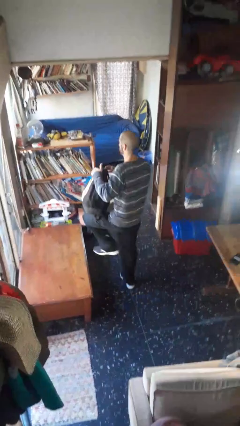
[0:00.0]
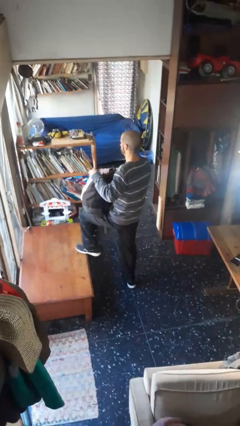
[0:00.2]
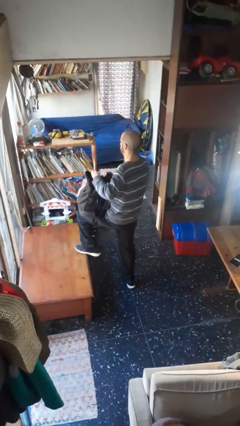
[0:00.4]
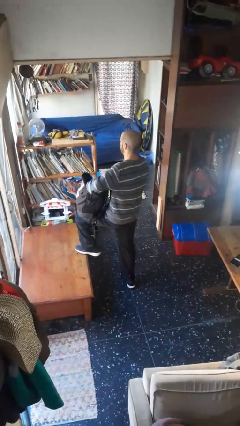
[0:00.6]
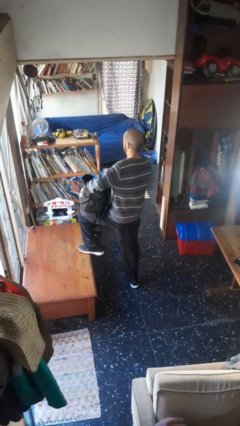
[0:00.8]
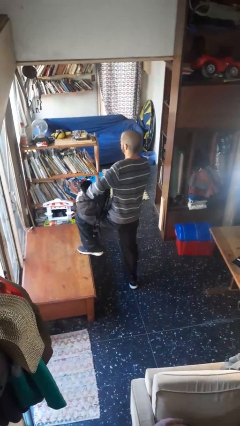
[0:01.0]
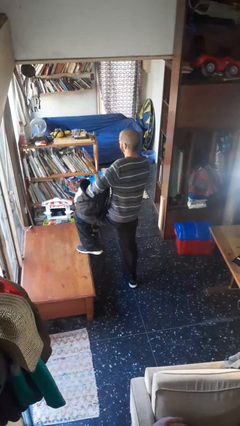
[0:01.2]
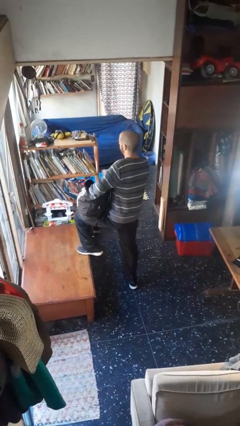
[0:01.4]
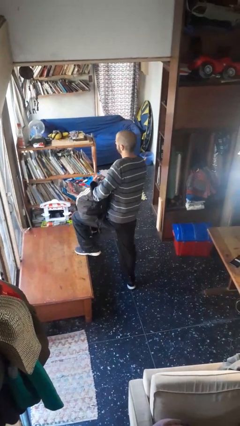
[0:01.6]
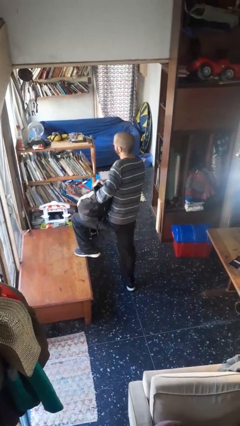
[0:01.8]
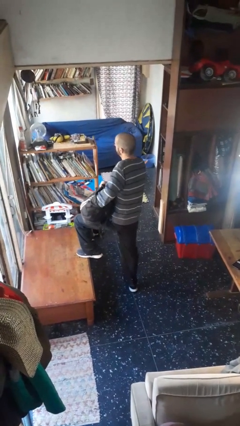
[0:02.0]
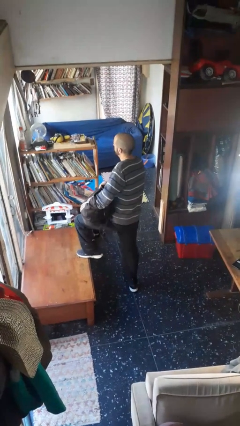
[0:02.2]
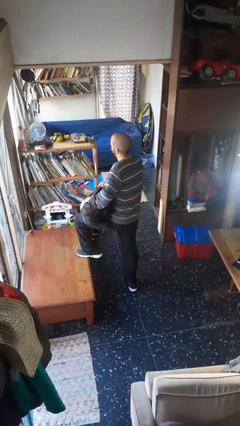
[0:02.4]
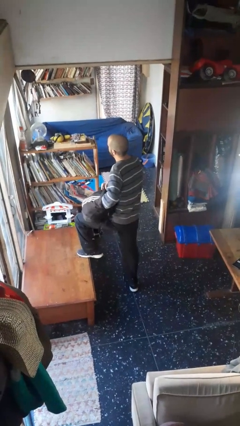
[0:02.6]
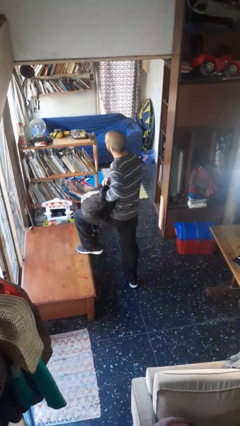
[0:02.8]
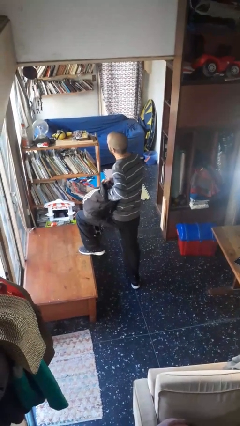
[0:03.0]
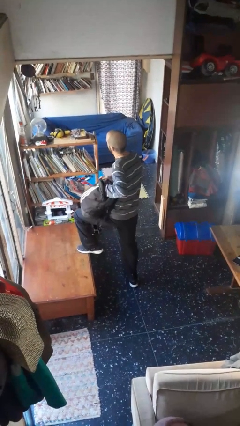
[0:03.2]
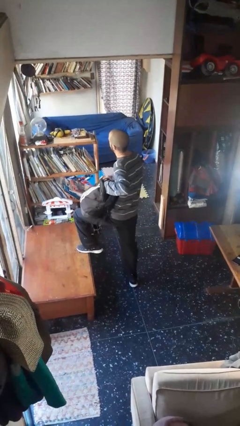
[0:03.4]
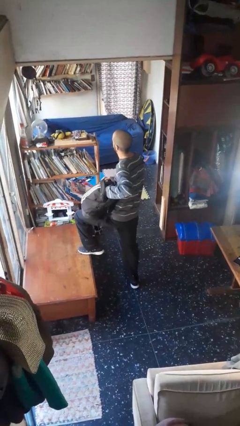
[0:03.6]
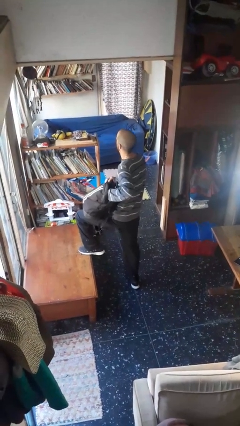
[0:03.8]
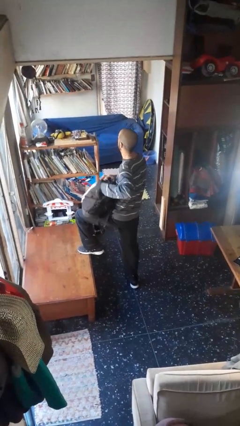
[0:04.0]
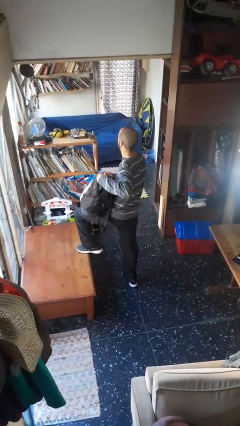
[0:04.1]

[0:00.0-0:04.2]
person searches in backpack

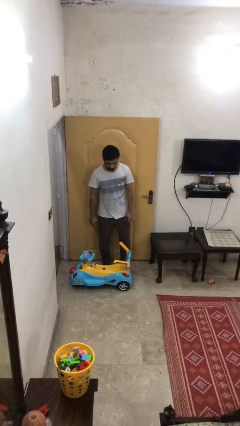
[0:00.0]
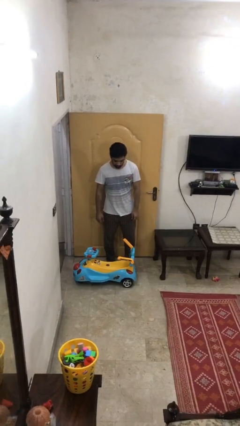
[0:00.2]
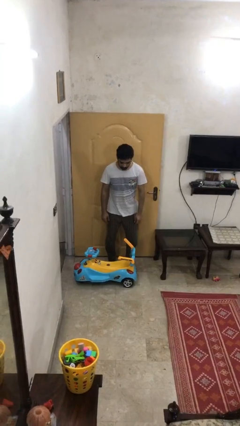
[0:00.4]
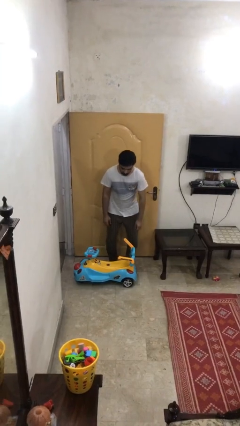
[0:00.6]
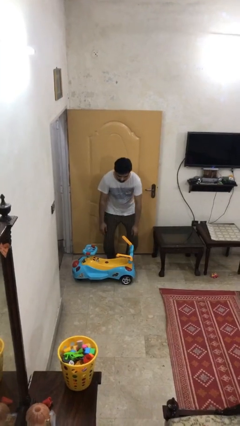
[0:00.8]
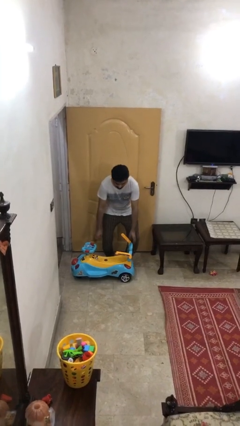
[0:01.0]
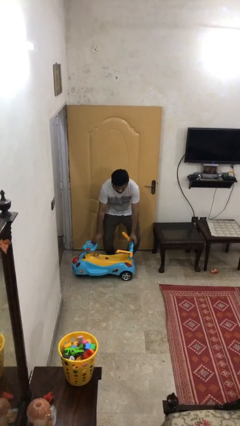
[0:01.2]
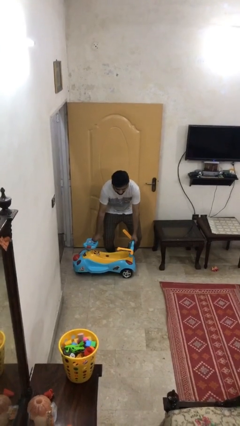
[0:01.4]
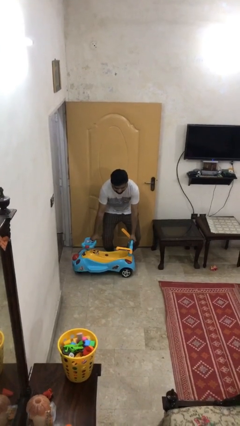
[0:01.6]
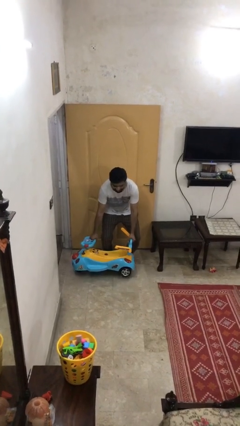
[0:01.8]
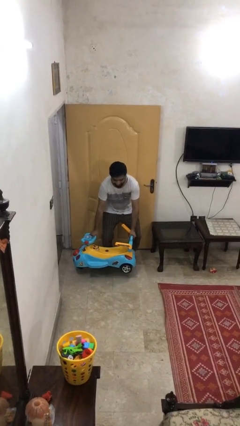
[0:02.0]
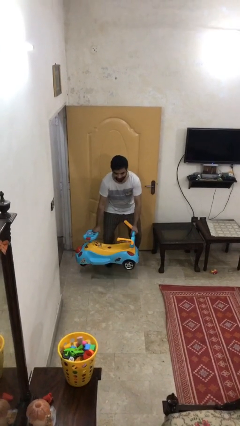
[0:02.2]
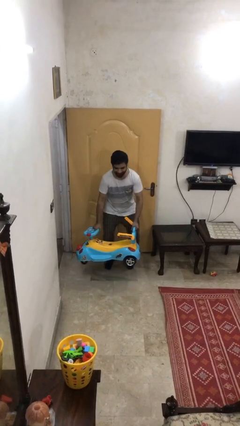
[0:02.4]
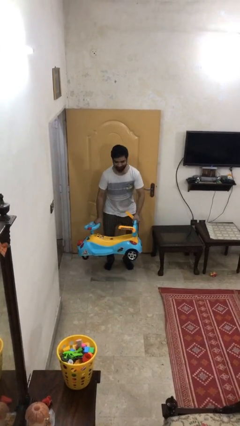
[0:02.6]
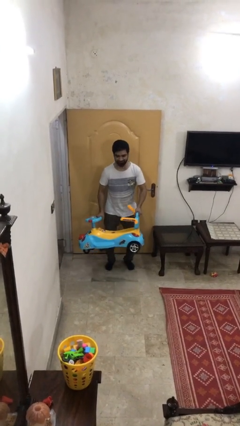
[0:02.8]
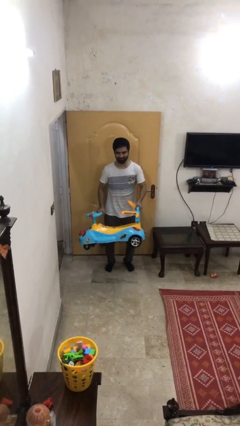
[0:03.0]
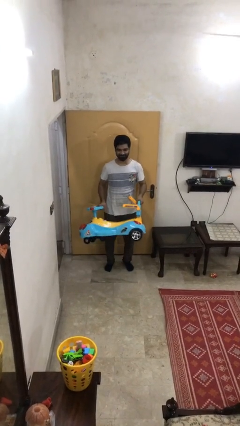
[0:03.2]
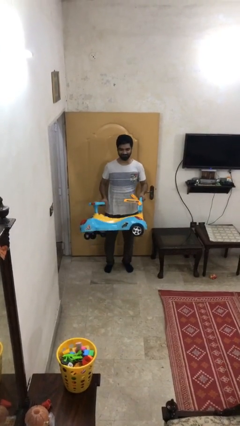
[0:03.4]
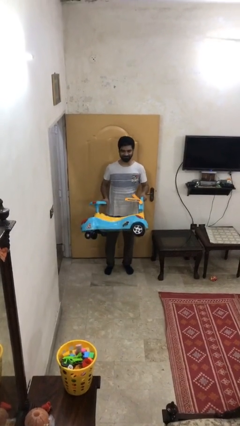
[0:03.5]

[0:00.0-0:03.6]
person picks up object from floor

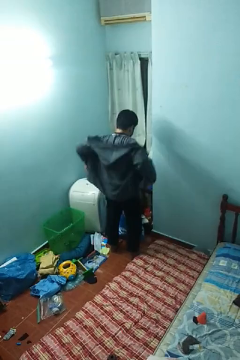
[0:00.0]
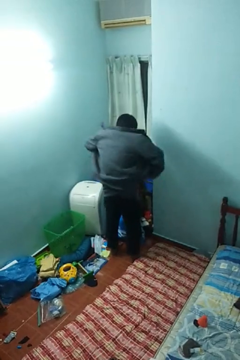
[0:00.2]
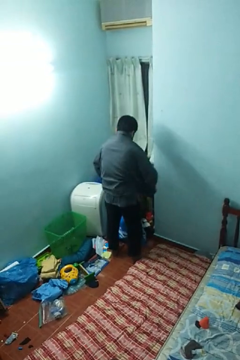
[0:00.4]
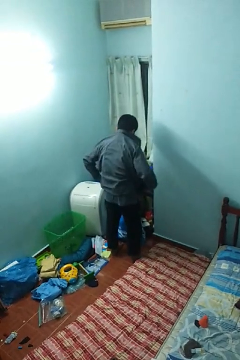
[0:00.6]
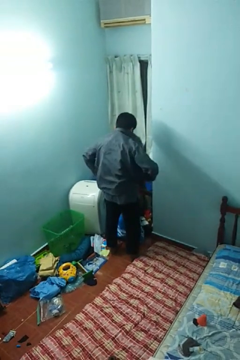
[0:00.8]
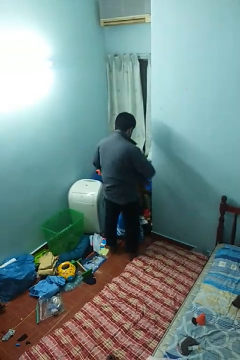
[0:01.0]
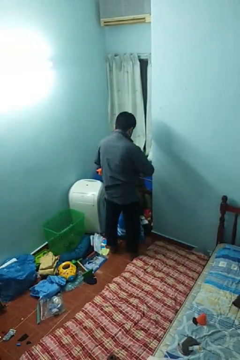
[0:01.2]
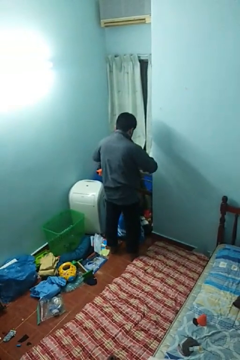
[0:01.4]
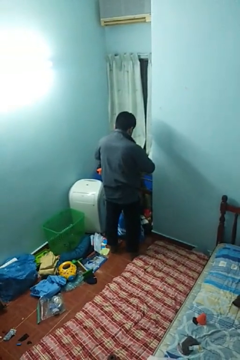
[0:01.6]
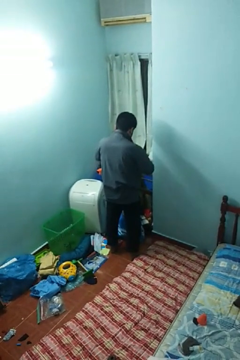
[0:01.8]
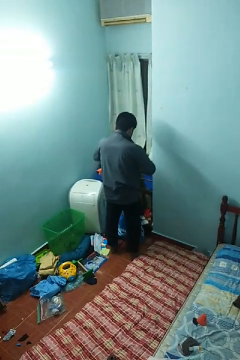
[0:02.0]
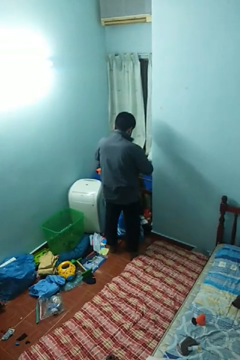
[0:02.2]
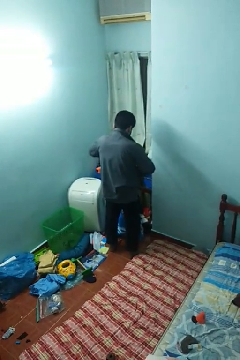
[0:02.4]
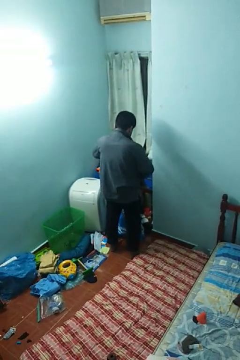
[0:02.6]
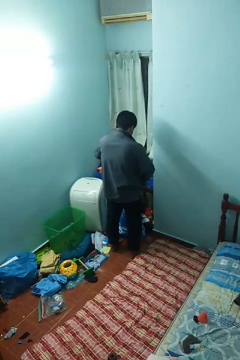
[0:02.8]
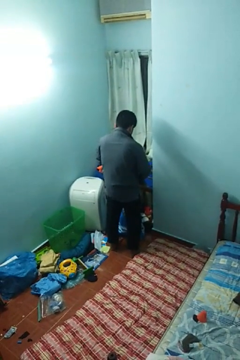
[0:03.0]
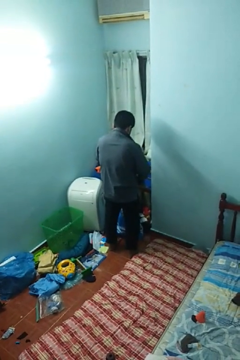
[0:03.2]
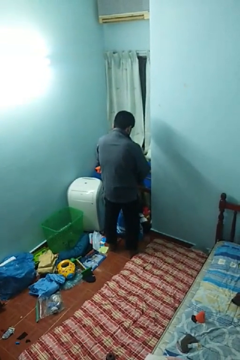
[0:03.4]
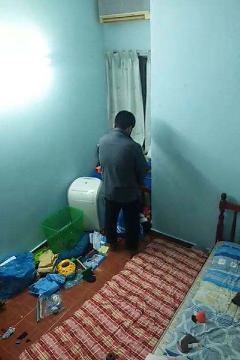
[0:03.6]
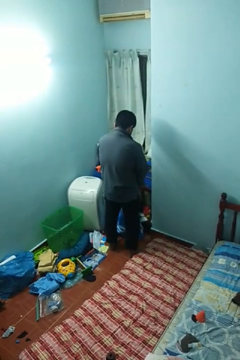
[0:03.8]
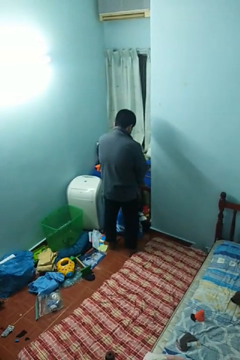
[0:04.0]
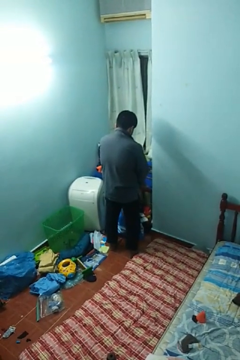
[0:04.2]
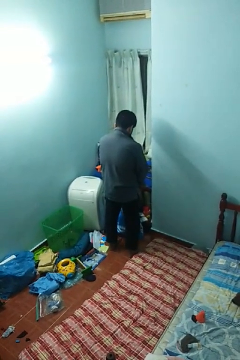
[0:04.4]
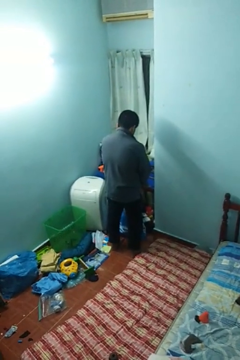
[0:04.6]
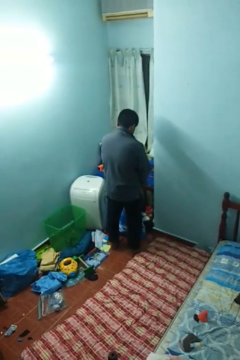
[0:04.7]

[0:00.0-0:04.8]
person buttons shirt

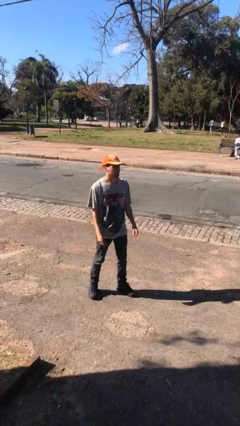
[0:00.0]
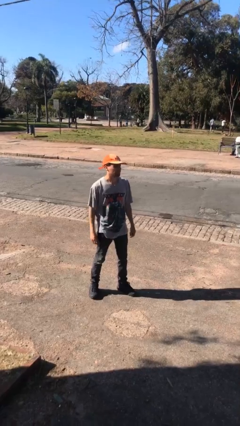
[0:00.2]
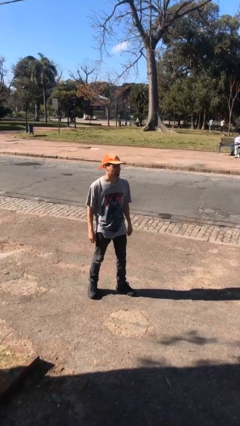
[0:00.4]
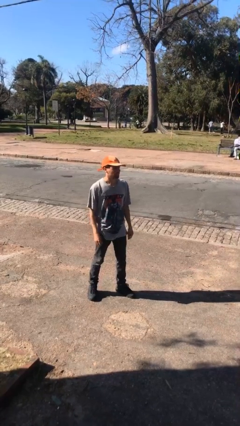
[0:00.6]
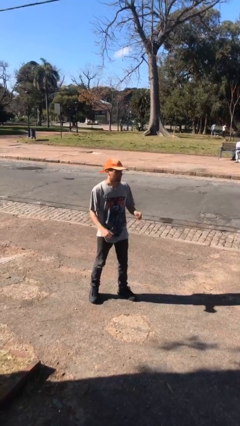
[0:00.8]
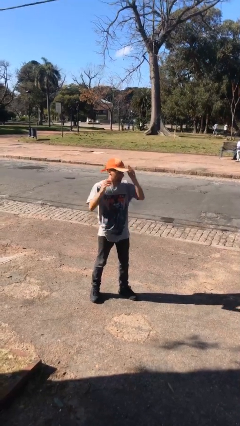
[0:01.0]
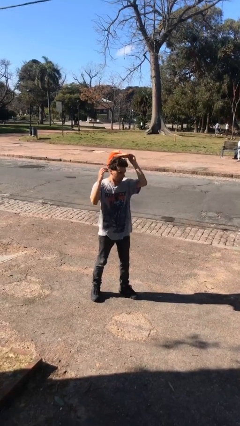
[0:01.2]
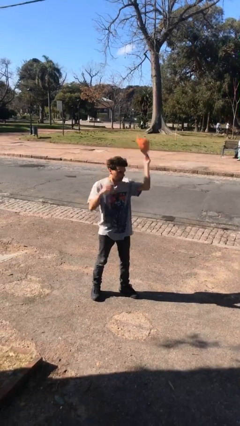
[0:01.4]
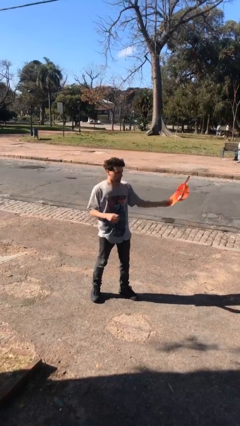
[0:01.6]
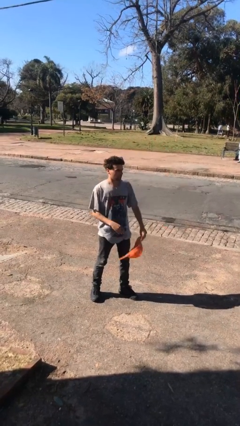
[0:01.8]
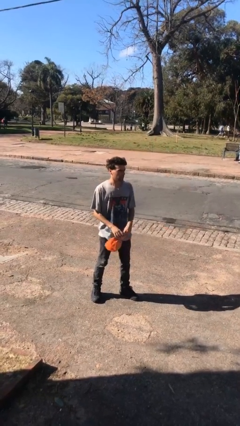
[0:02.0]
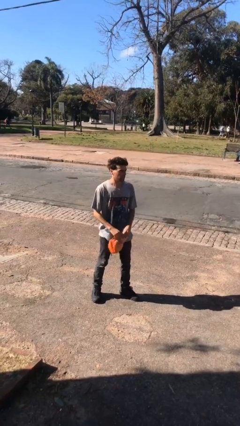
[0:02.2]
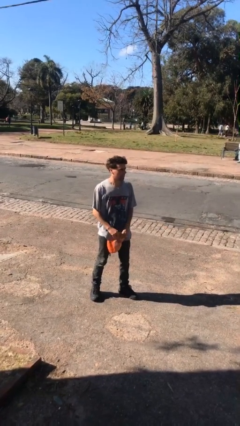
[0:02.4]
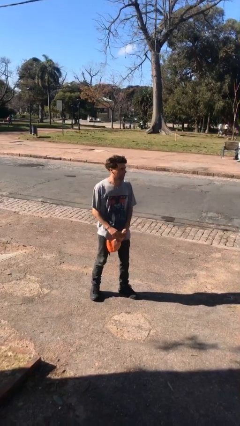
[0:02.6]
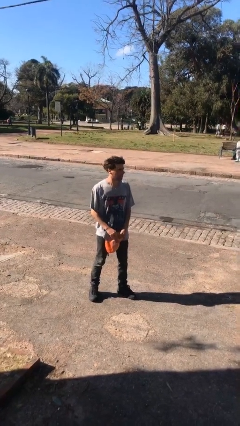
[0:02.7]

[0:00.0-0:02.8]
person takes off hat

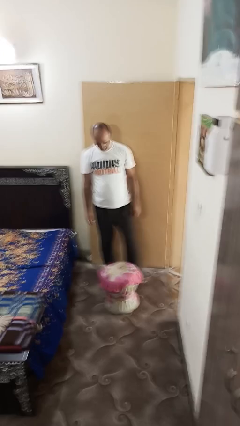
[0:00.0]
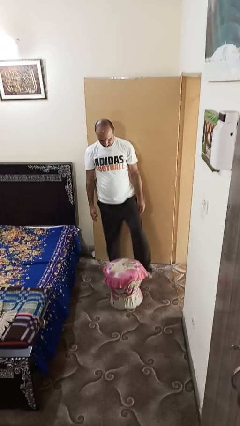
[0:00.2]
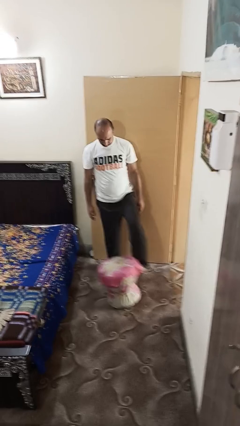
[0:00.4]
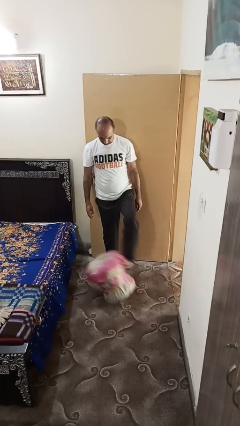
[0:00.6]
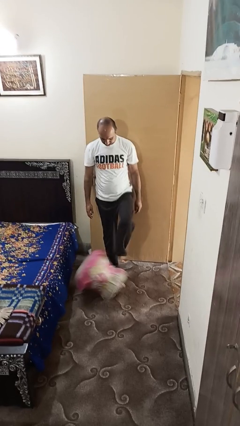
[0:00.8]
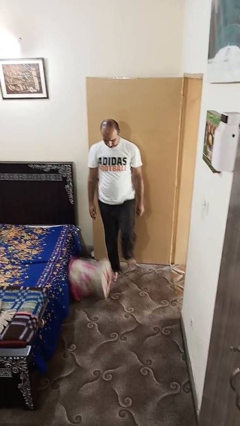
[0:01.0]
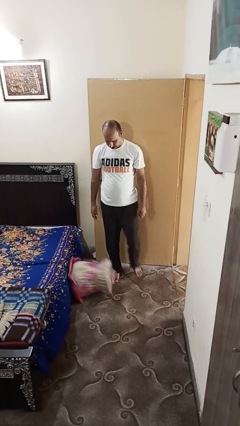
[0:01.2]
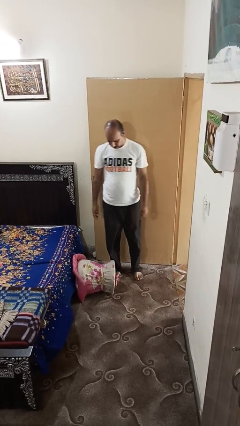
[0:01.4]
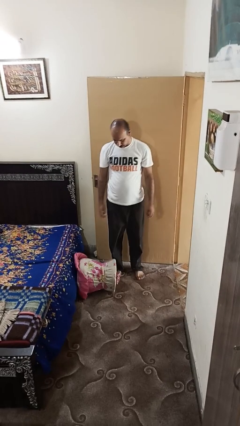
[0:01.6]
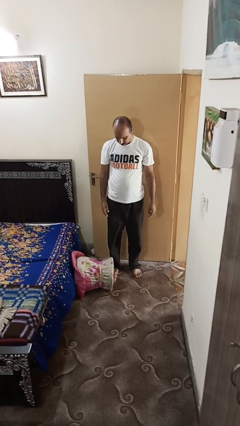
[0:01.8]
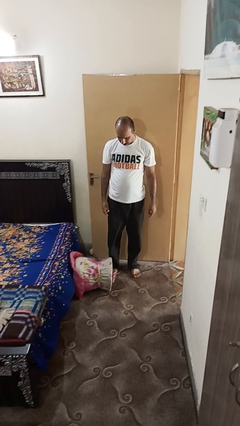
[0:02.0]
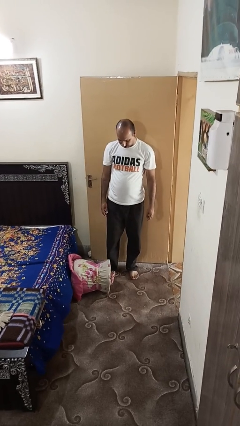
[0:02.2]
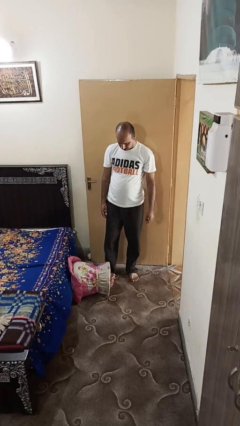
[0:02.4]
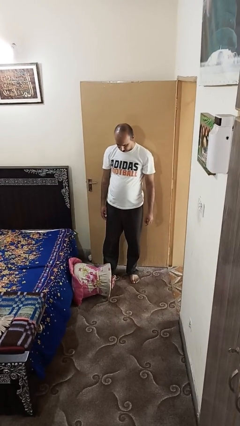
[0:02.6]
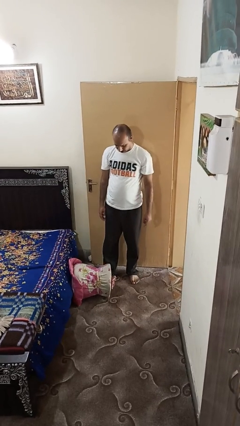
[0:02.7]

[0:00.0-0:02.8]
person knocks over furniture
